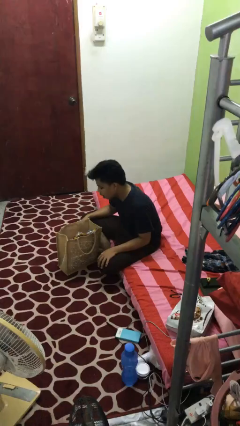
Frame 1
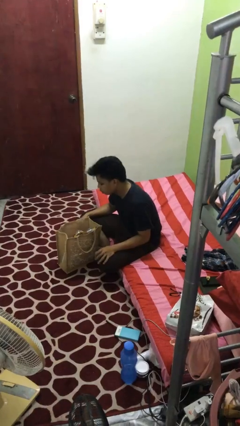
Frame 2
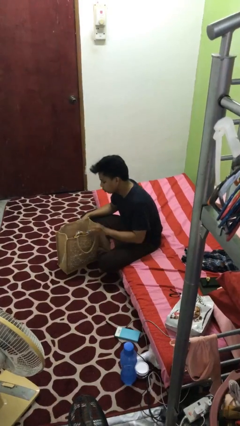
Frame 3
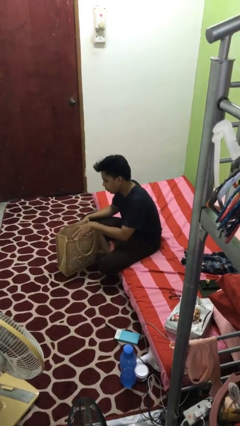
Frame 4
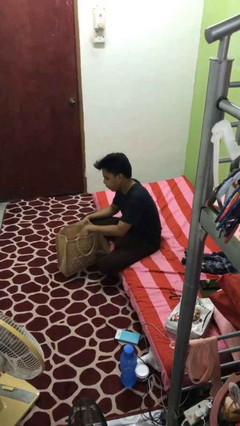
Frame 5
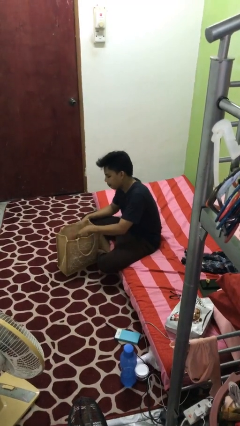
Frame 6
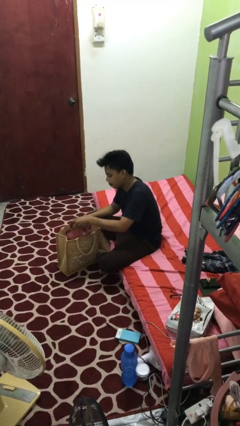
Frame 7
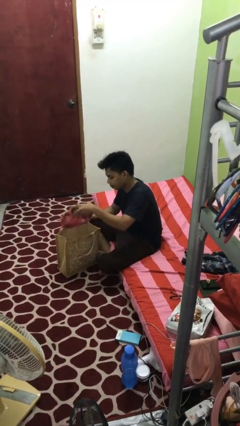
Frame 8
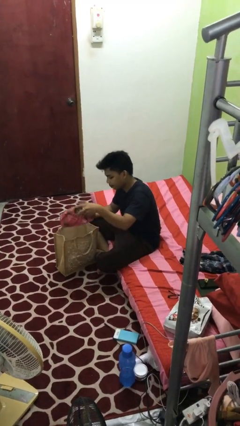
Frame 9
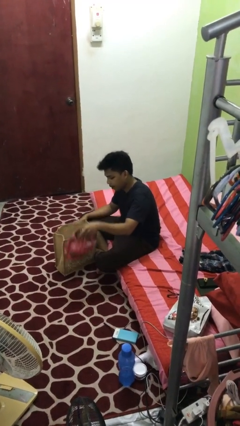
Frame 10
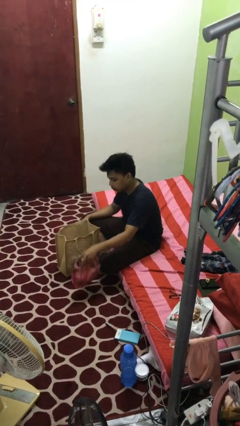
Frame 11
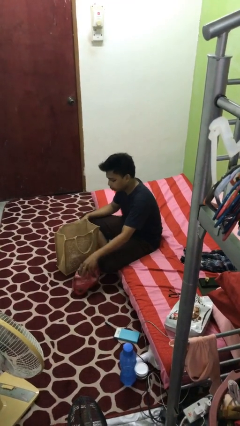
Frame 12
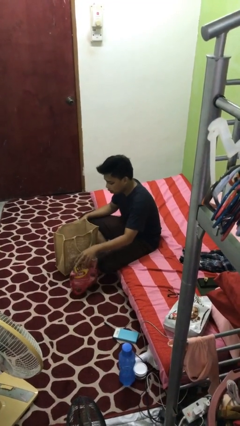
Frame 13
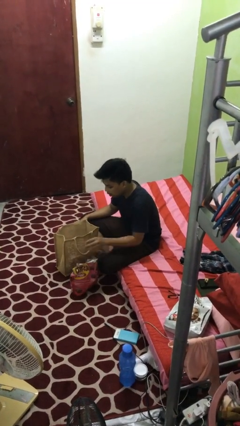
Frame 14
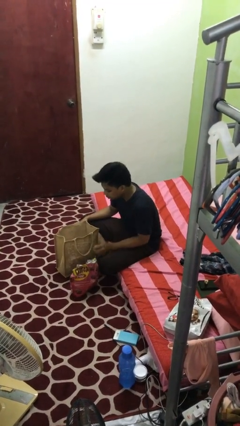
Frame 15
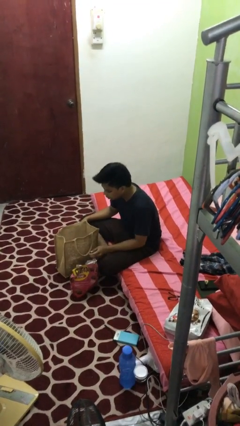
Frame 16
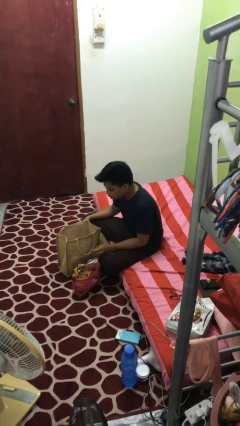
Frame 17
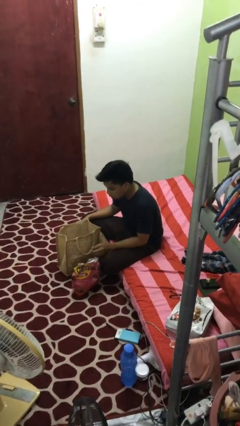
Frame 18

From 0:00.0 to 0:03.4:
person takes object from bag

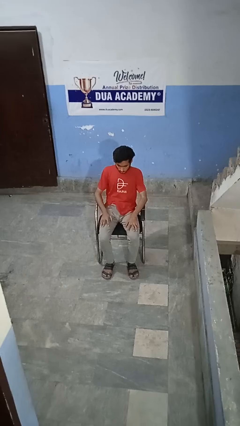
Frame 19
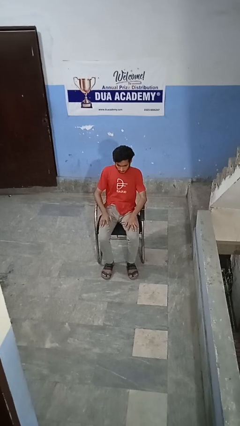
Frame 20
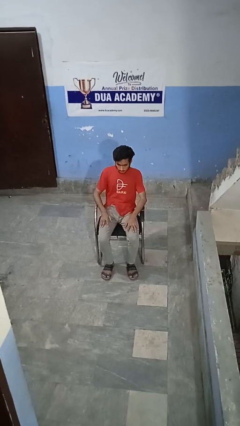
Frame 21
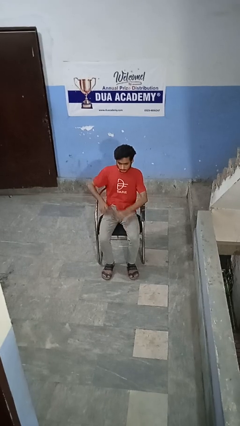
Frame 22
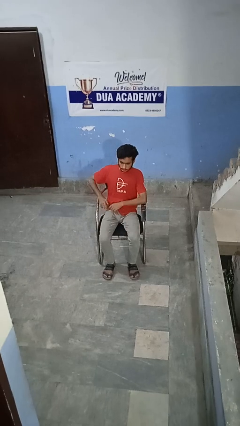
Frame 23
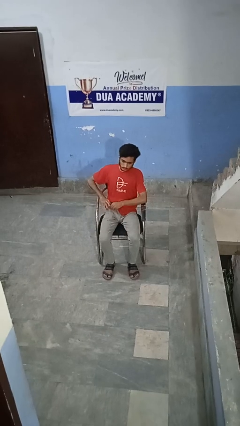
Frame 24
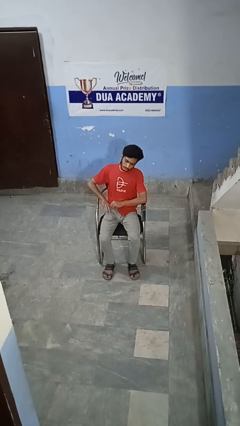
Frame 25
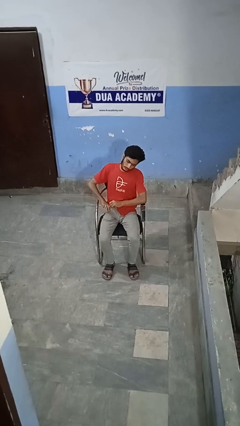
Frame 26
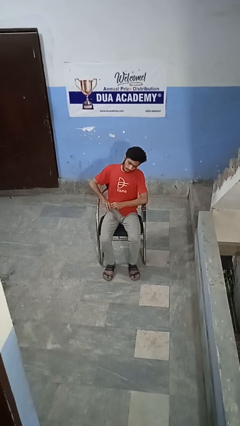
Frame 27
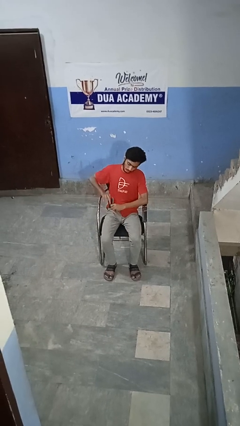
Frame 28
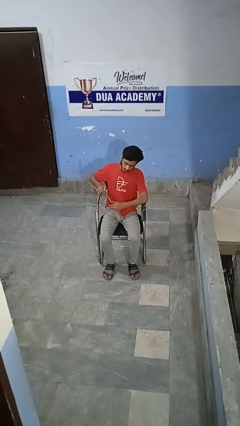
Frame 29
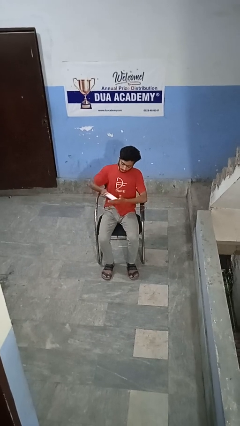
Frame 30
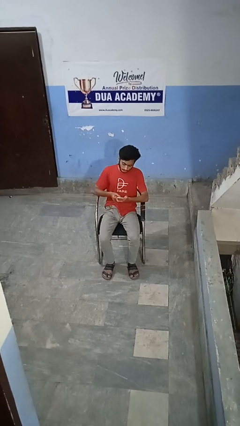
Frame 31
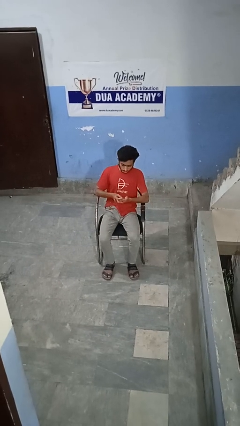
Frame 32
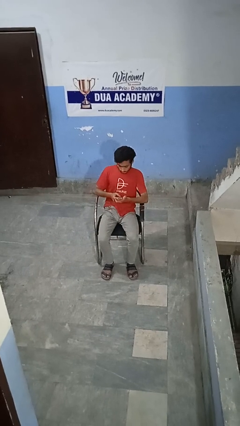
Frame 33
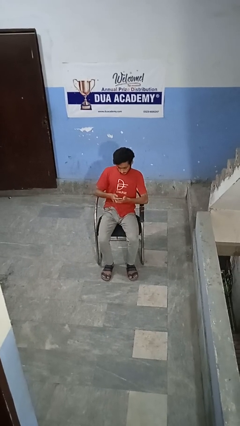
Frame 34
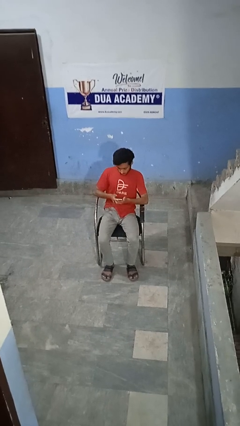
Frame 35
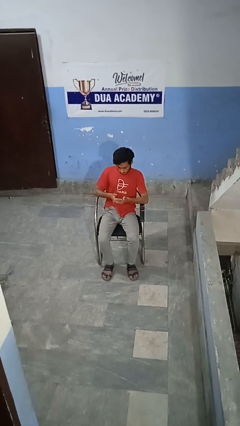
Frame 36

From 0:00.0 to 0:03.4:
person takes phone from pocket

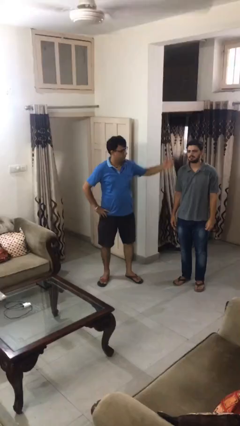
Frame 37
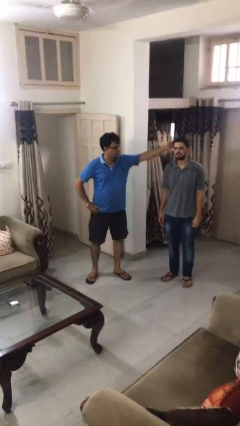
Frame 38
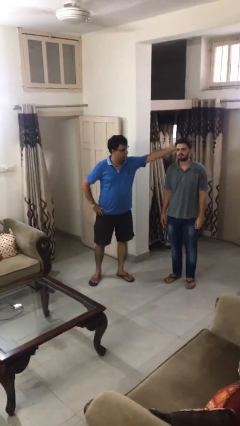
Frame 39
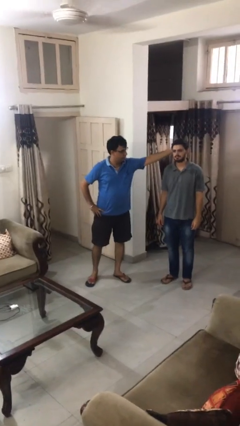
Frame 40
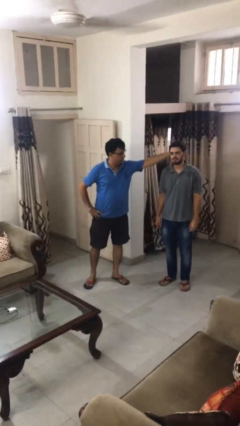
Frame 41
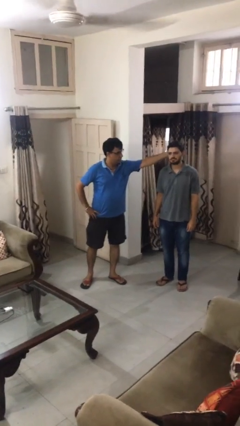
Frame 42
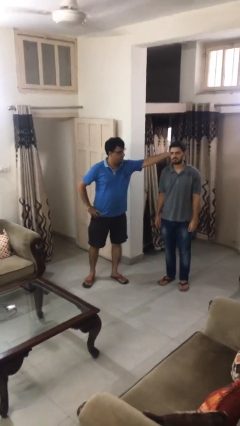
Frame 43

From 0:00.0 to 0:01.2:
person grabs person by hair

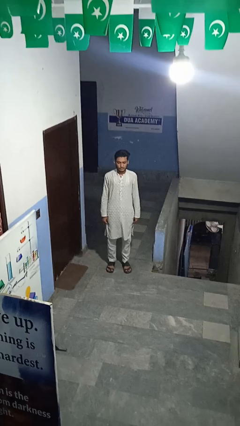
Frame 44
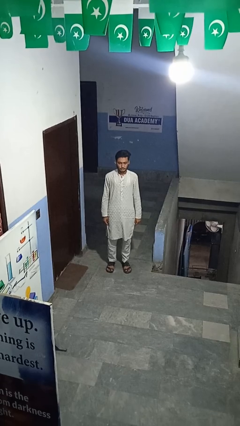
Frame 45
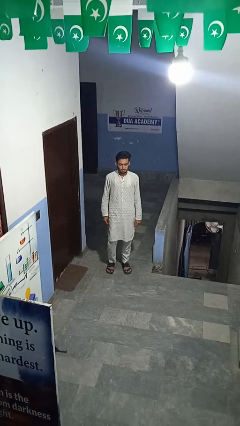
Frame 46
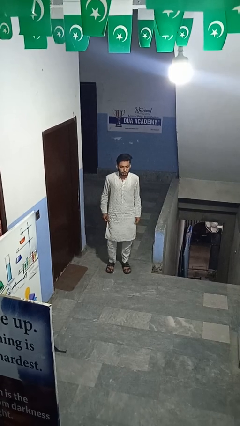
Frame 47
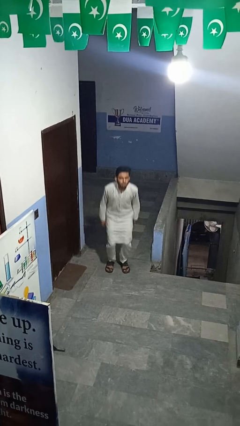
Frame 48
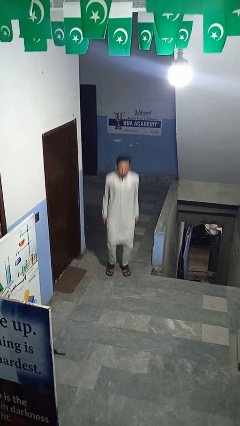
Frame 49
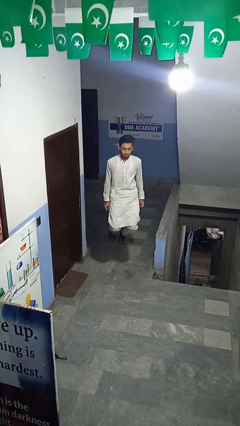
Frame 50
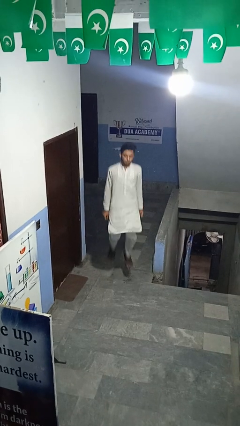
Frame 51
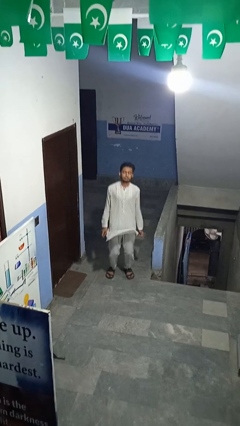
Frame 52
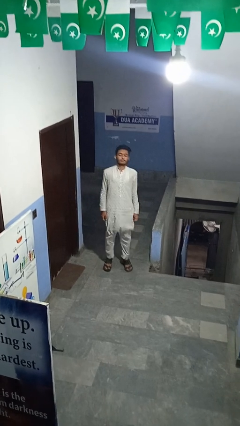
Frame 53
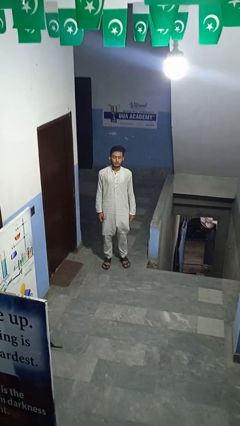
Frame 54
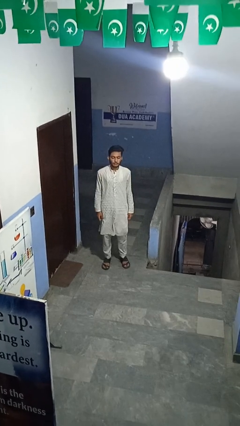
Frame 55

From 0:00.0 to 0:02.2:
person jumps

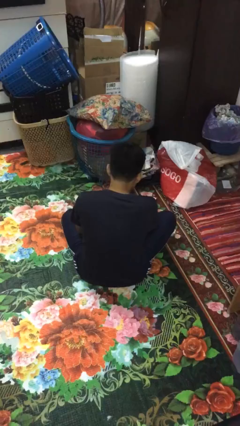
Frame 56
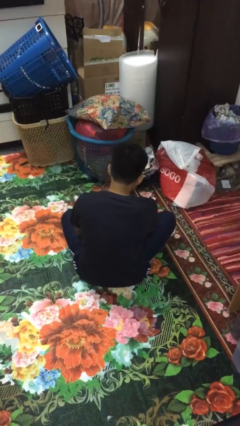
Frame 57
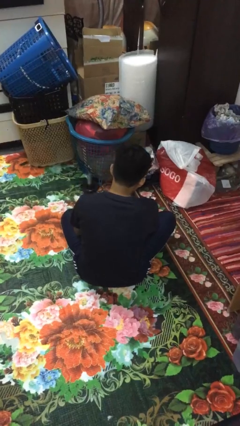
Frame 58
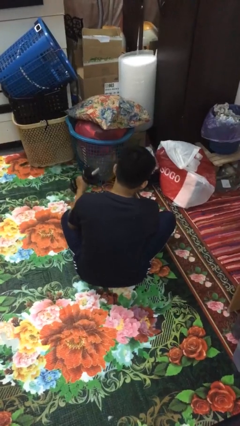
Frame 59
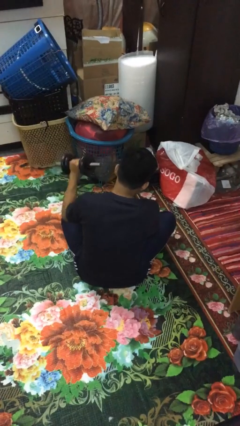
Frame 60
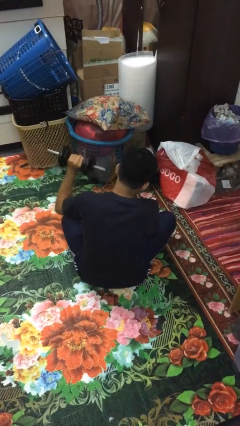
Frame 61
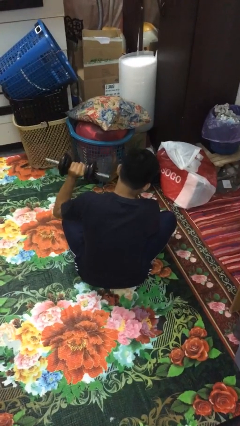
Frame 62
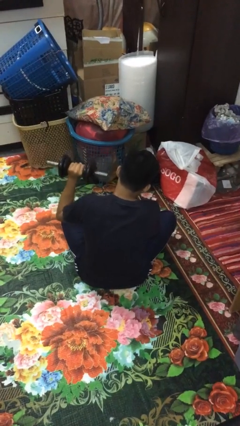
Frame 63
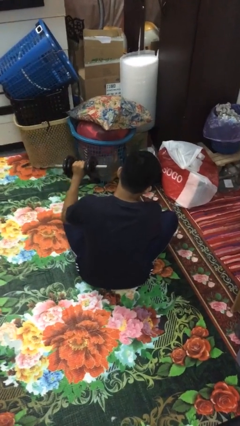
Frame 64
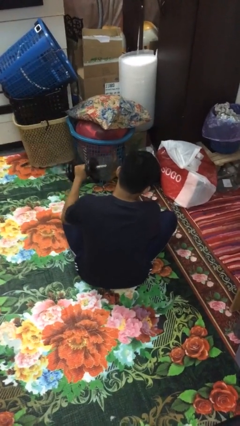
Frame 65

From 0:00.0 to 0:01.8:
person lifts dumbbells

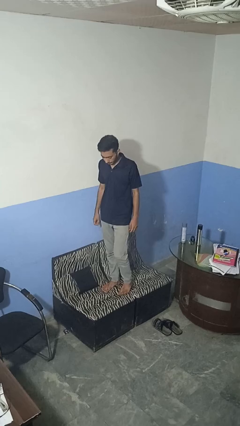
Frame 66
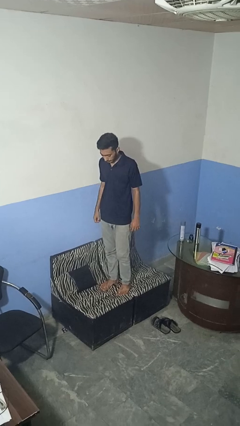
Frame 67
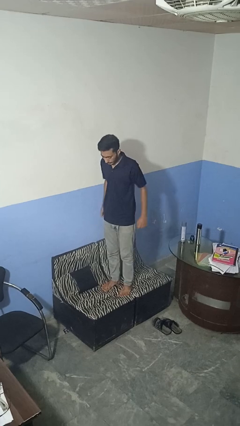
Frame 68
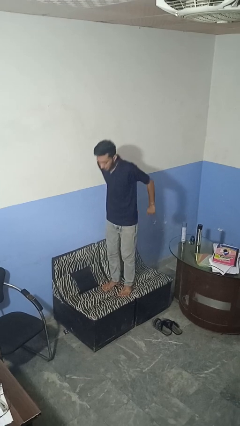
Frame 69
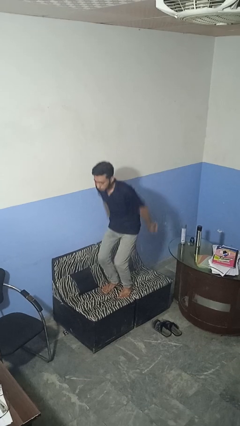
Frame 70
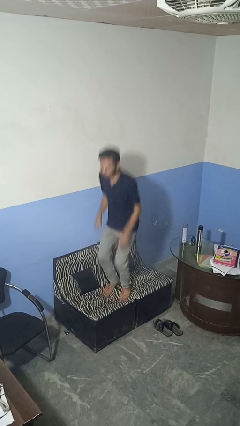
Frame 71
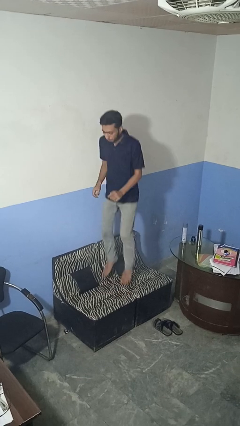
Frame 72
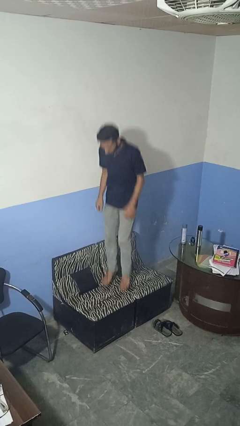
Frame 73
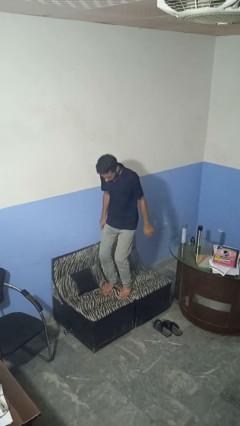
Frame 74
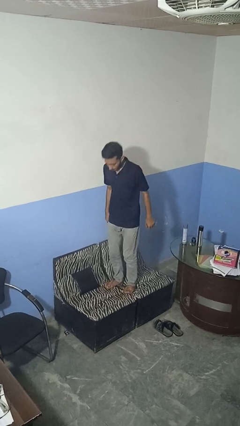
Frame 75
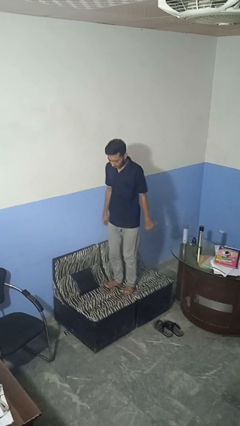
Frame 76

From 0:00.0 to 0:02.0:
person jumps on couch

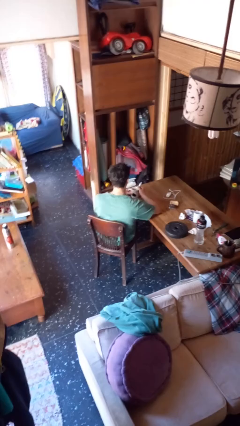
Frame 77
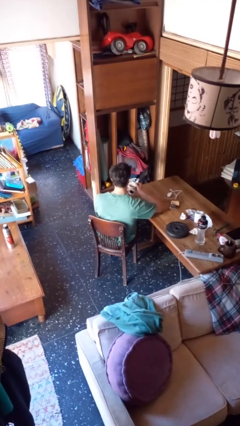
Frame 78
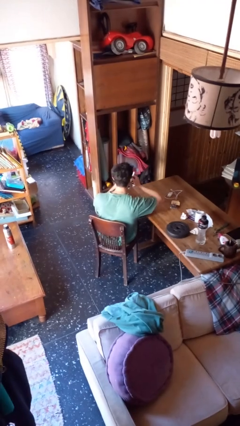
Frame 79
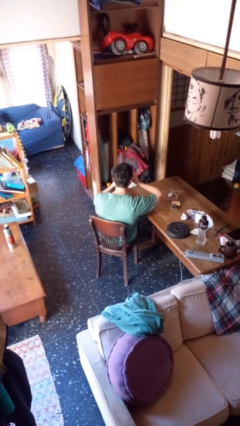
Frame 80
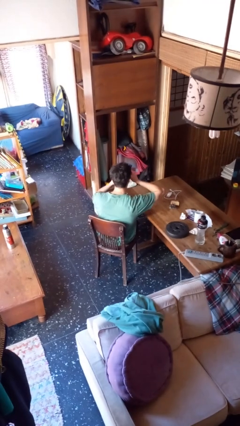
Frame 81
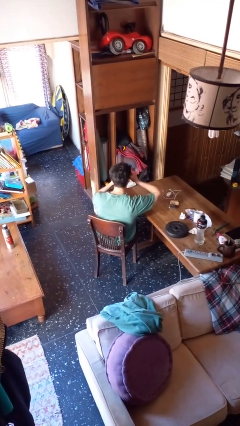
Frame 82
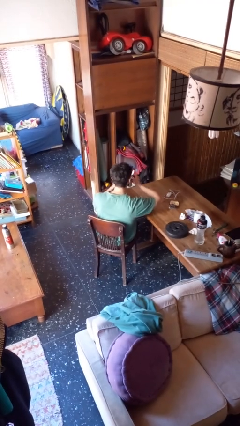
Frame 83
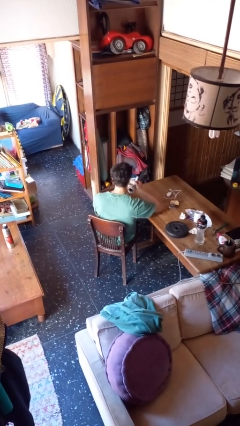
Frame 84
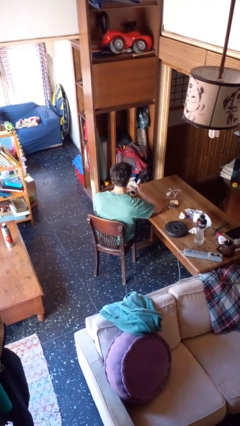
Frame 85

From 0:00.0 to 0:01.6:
person drinks from mug

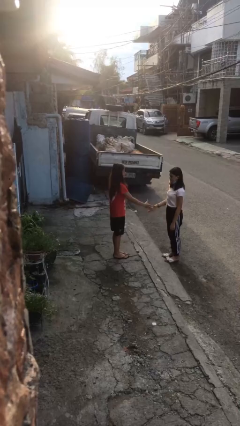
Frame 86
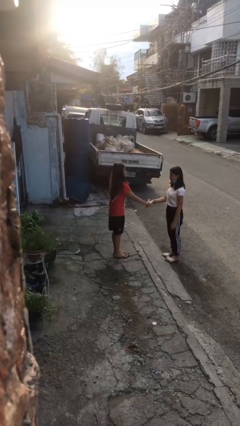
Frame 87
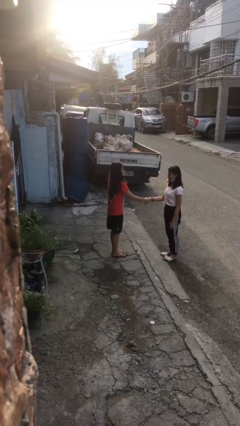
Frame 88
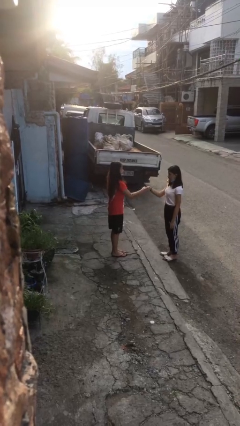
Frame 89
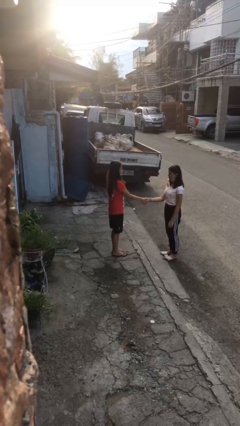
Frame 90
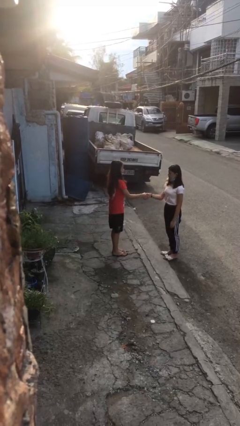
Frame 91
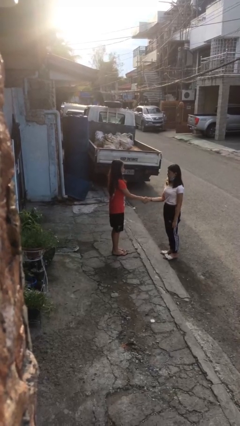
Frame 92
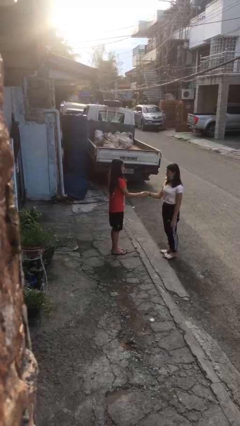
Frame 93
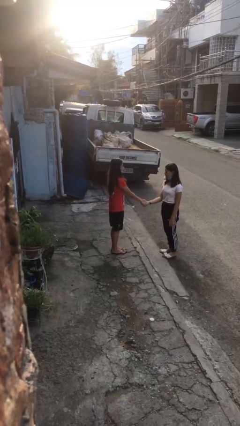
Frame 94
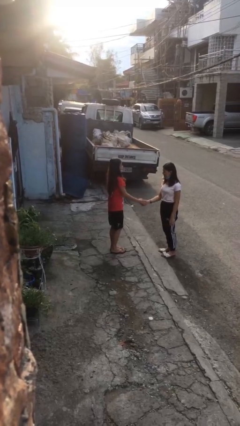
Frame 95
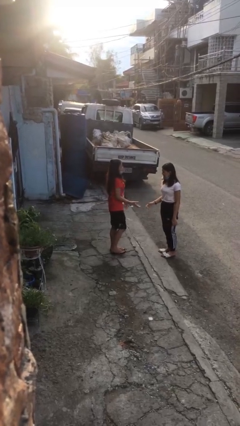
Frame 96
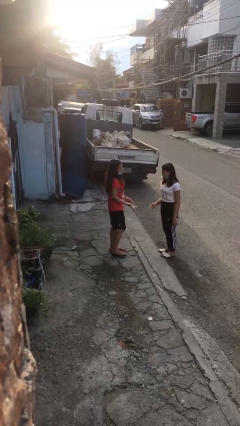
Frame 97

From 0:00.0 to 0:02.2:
person shakes hand
